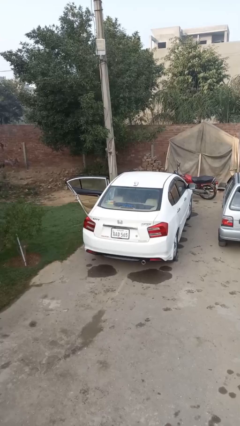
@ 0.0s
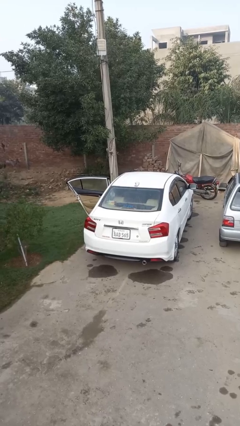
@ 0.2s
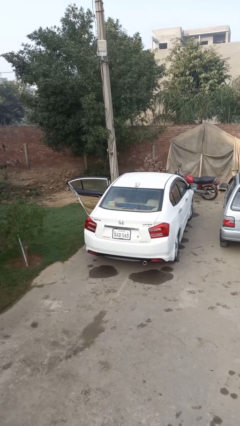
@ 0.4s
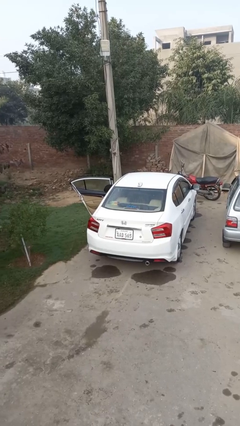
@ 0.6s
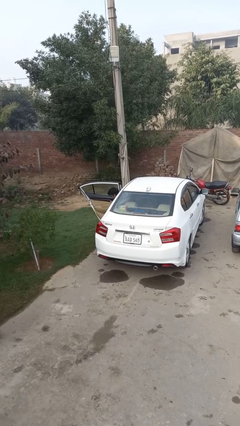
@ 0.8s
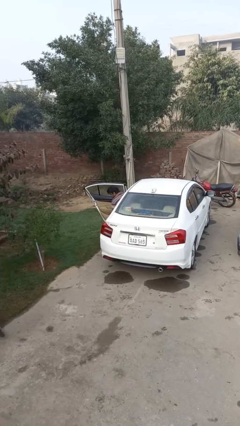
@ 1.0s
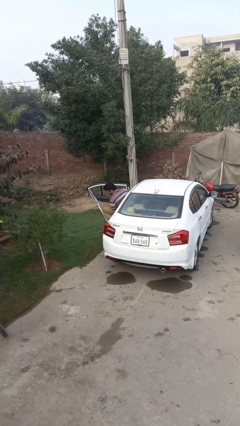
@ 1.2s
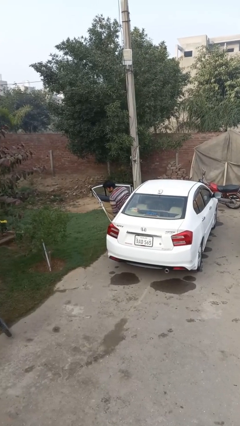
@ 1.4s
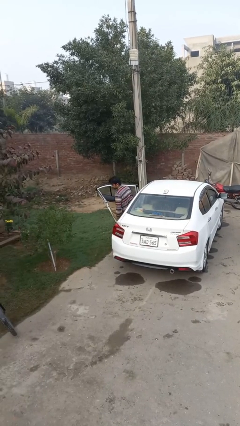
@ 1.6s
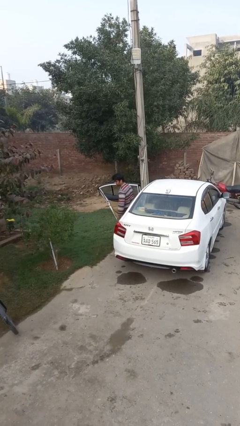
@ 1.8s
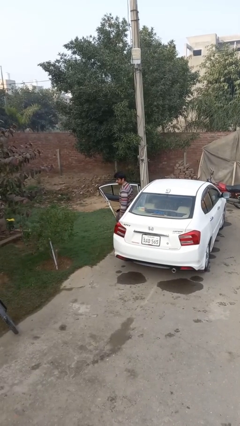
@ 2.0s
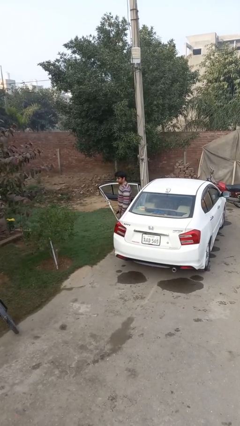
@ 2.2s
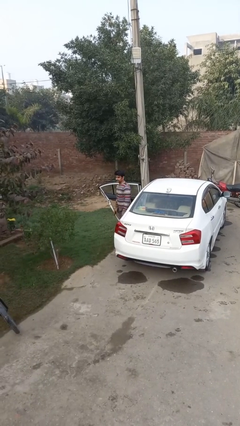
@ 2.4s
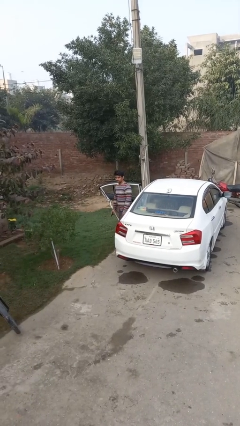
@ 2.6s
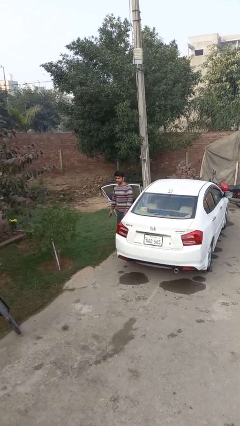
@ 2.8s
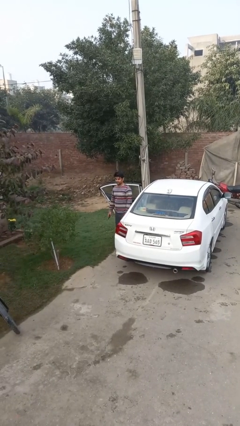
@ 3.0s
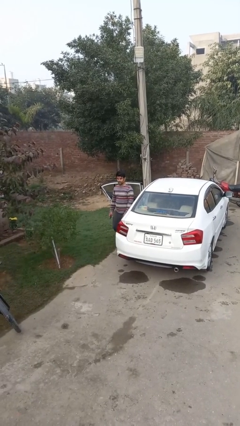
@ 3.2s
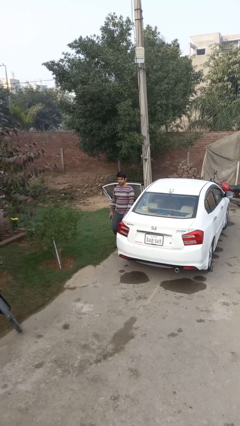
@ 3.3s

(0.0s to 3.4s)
person exits car

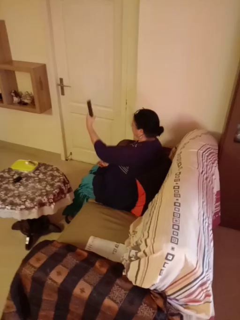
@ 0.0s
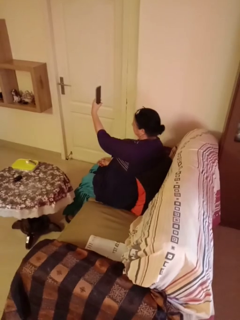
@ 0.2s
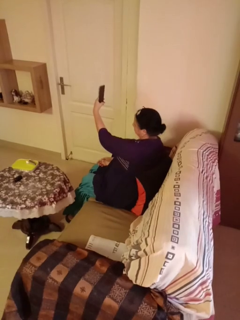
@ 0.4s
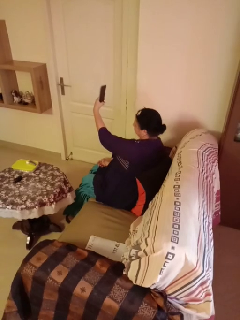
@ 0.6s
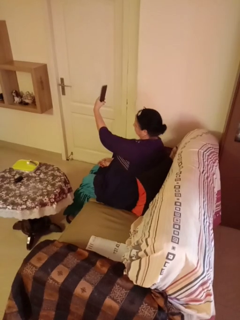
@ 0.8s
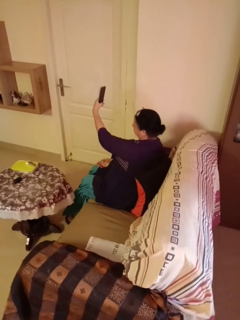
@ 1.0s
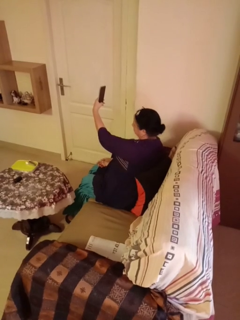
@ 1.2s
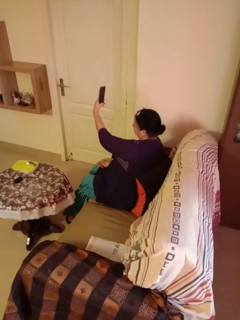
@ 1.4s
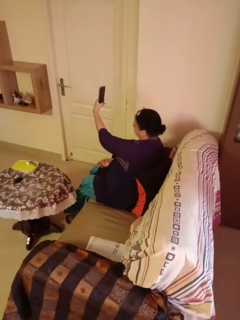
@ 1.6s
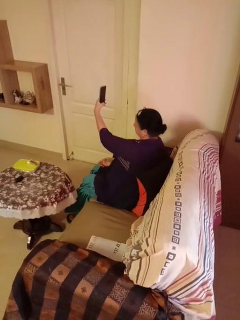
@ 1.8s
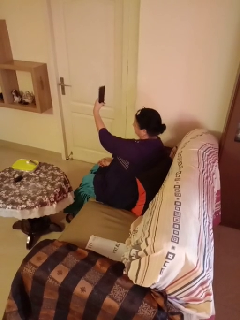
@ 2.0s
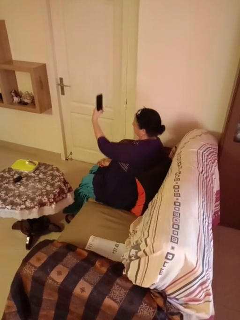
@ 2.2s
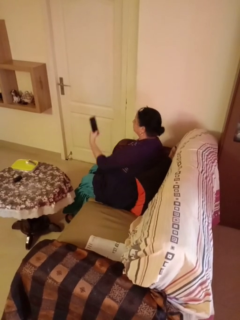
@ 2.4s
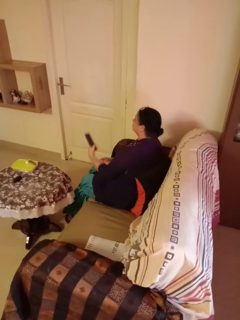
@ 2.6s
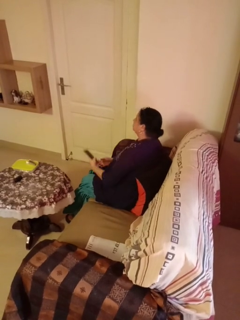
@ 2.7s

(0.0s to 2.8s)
person takes selfie

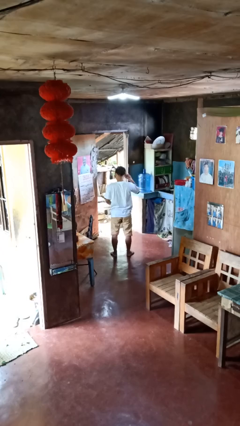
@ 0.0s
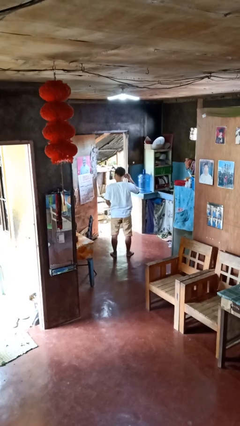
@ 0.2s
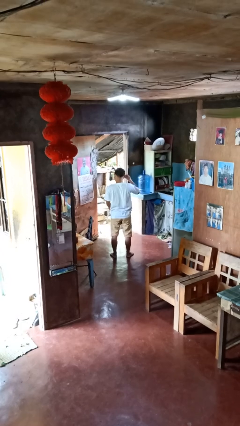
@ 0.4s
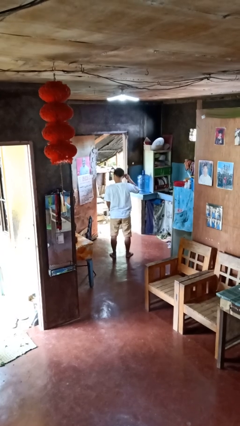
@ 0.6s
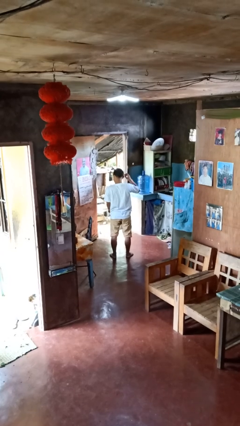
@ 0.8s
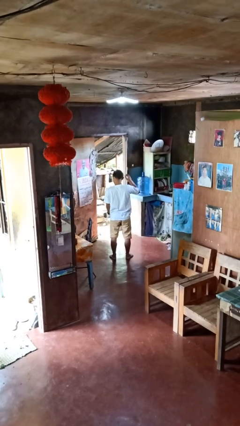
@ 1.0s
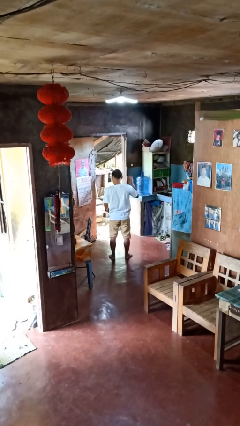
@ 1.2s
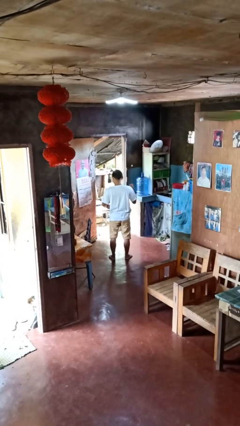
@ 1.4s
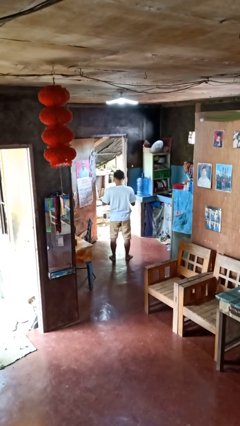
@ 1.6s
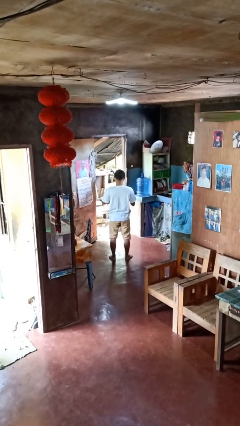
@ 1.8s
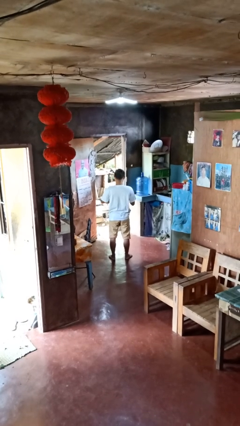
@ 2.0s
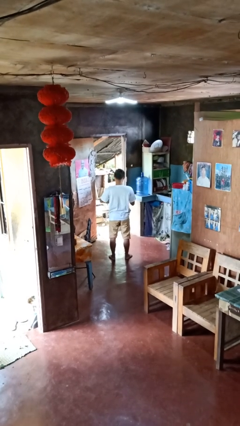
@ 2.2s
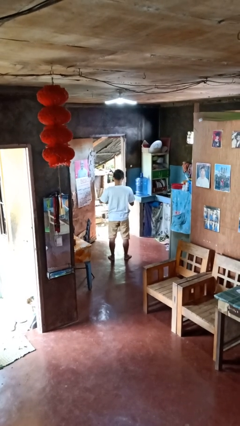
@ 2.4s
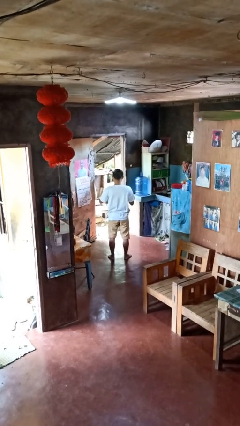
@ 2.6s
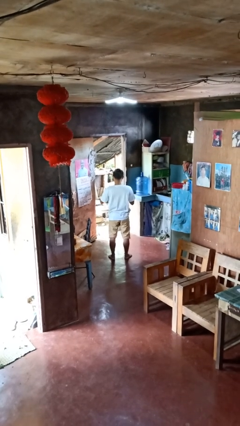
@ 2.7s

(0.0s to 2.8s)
person takes off headphones

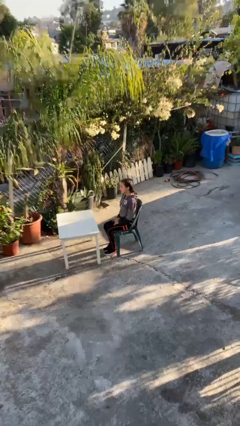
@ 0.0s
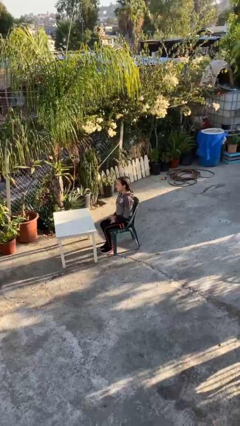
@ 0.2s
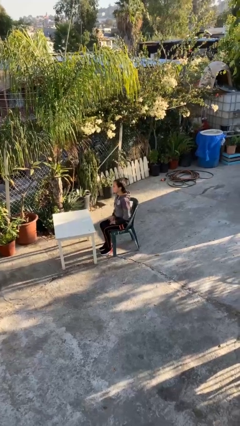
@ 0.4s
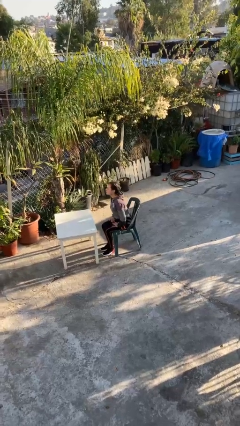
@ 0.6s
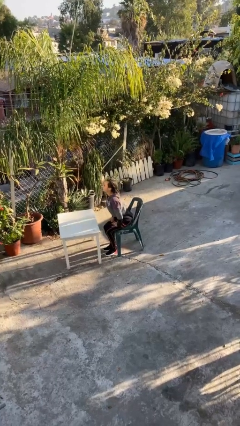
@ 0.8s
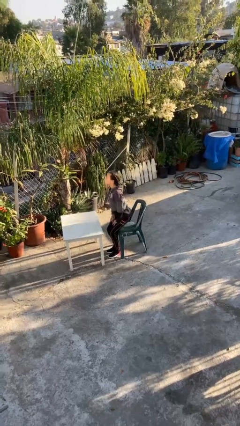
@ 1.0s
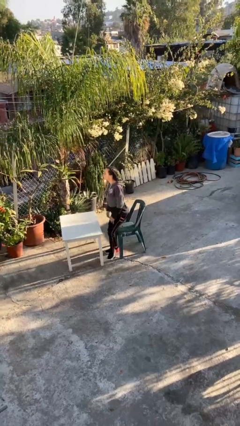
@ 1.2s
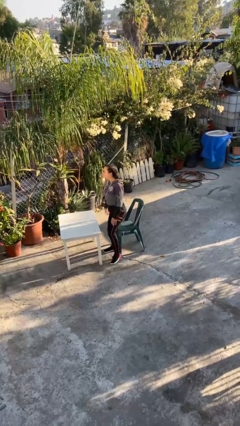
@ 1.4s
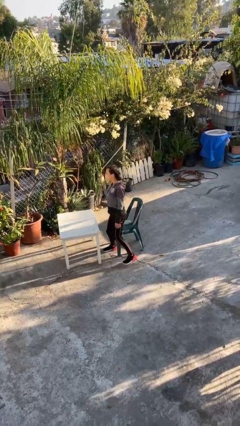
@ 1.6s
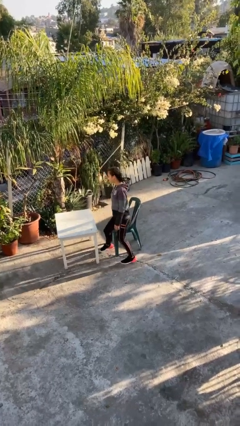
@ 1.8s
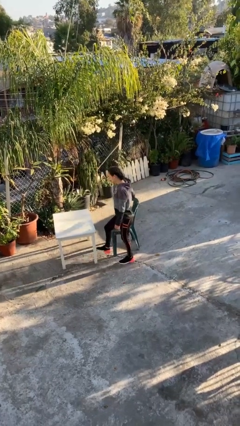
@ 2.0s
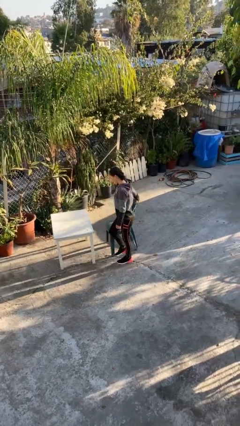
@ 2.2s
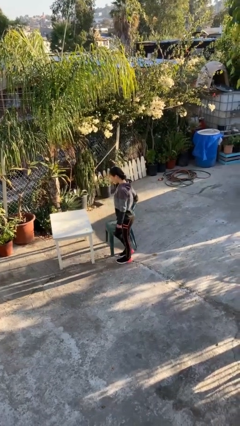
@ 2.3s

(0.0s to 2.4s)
person stands up

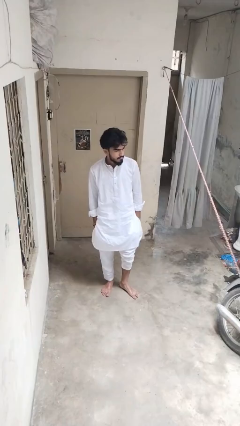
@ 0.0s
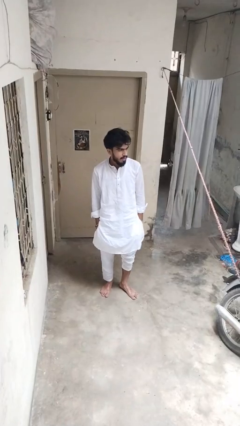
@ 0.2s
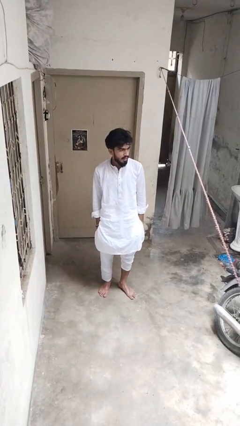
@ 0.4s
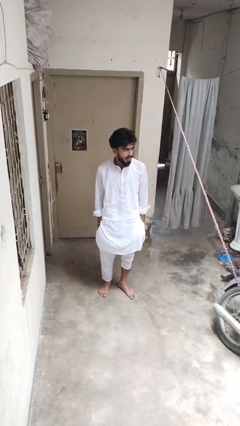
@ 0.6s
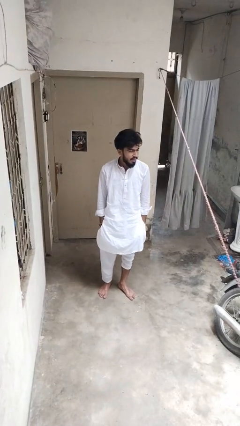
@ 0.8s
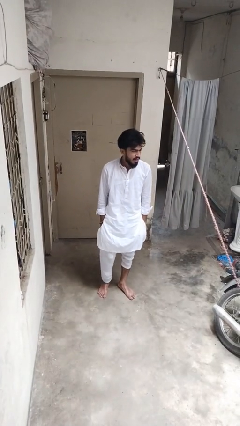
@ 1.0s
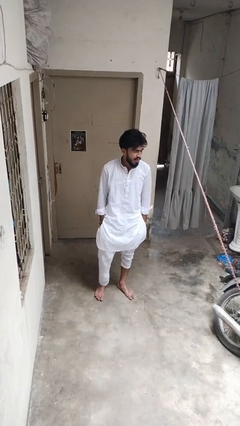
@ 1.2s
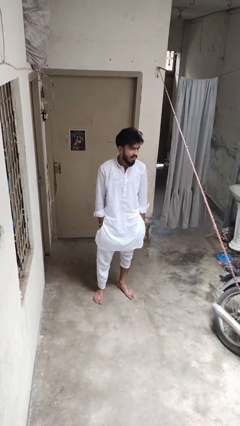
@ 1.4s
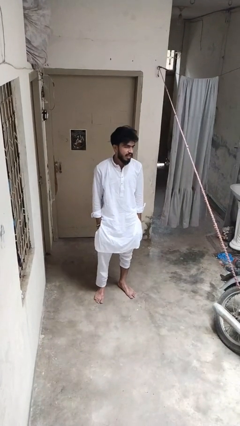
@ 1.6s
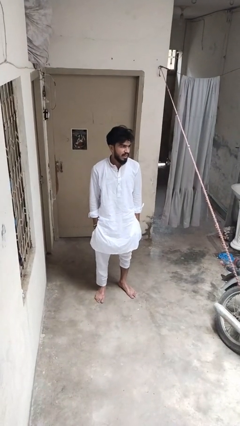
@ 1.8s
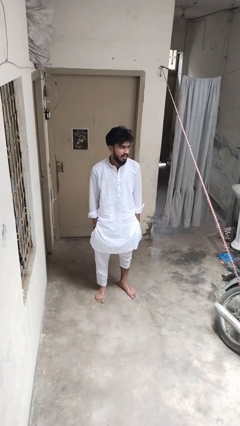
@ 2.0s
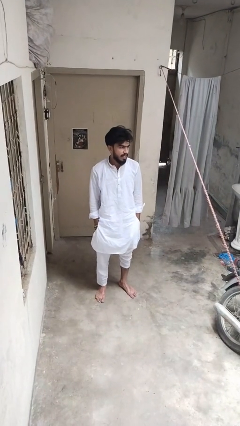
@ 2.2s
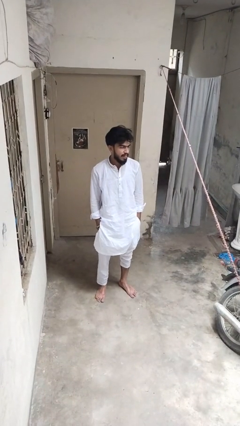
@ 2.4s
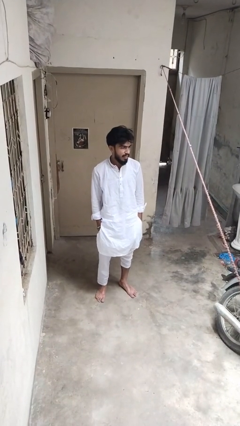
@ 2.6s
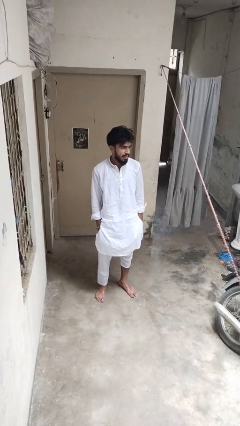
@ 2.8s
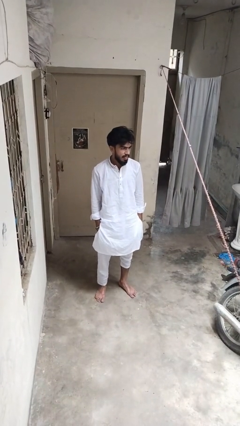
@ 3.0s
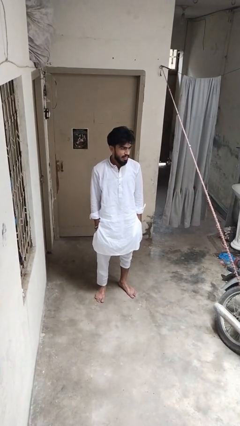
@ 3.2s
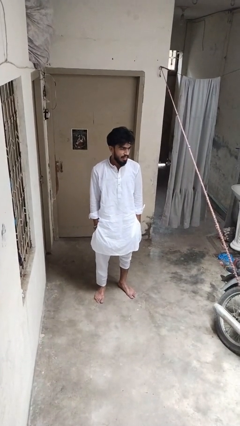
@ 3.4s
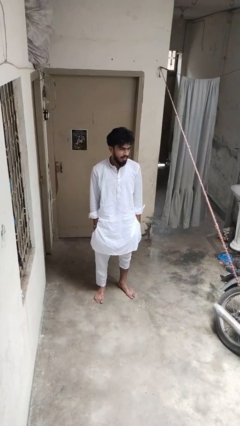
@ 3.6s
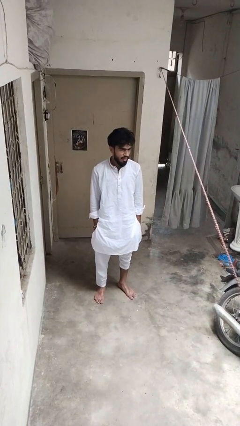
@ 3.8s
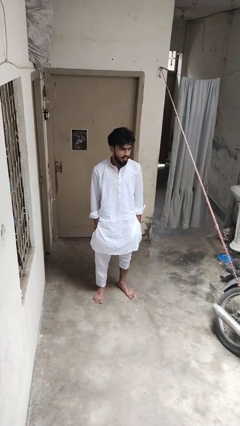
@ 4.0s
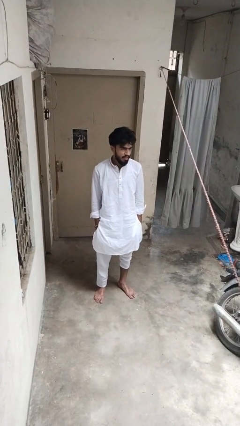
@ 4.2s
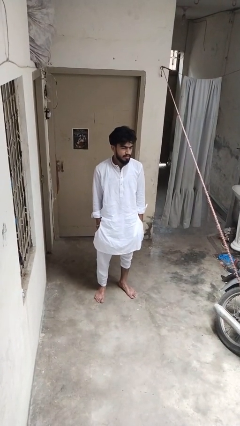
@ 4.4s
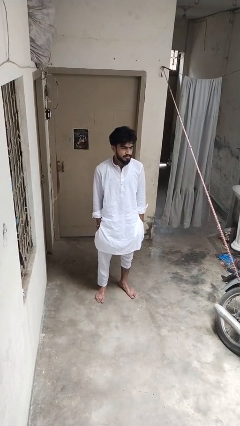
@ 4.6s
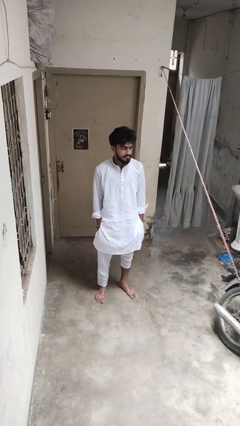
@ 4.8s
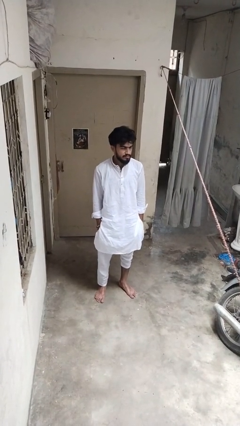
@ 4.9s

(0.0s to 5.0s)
person sticks out tongue

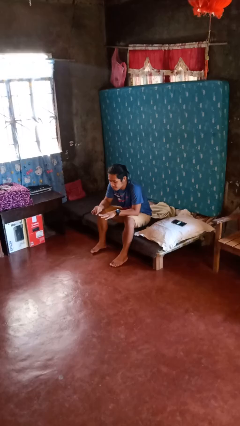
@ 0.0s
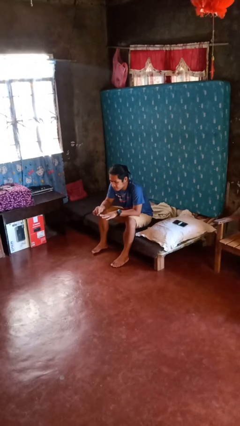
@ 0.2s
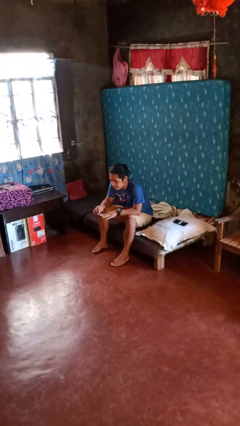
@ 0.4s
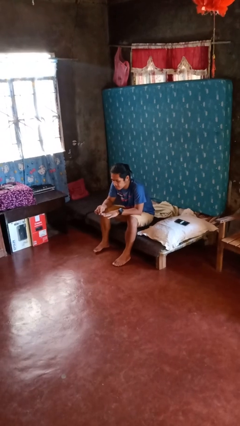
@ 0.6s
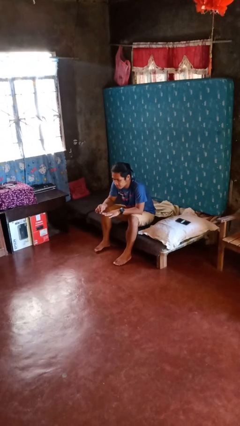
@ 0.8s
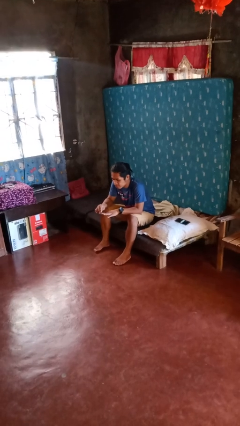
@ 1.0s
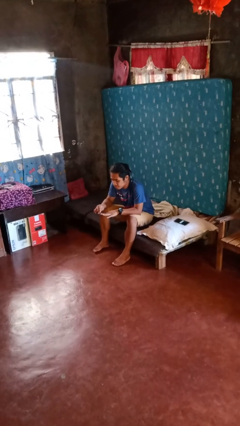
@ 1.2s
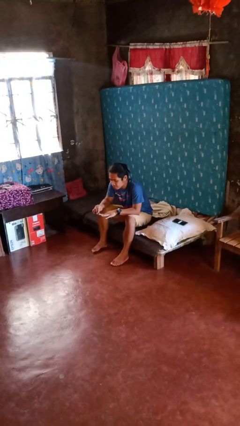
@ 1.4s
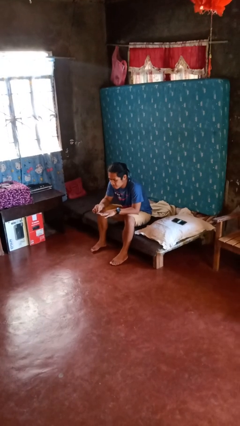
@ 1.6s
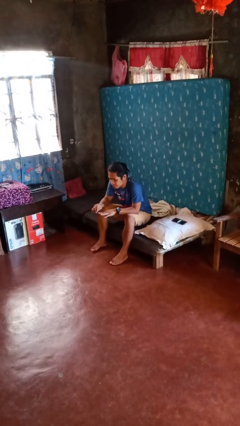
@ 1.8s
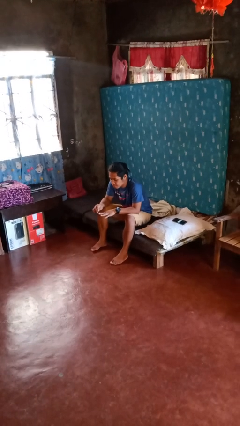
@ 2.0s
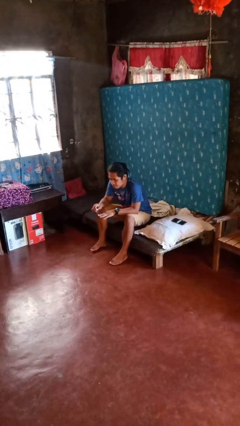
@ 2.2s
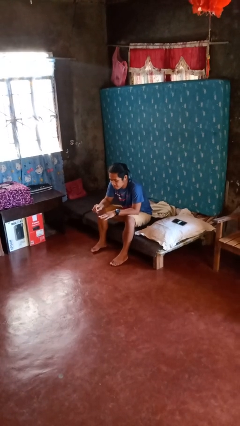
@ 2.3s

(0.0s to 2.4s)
person files fingernails
